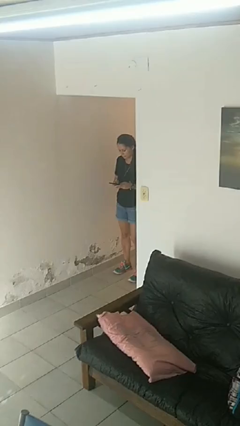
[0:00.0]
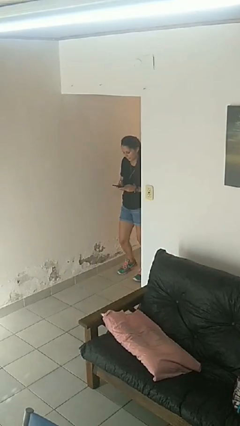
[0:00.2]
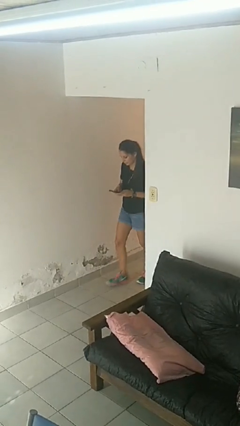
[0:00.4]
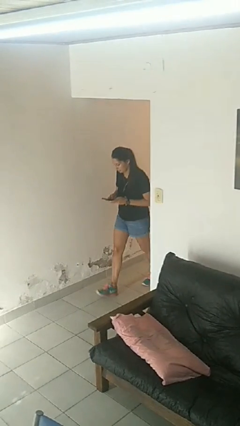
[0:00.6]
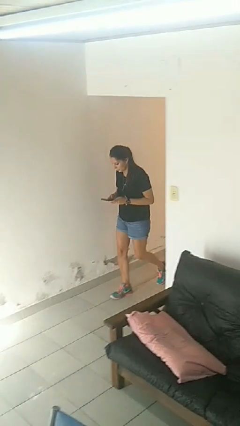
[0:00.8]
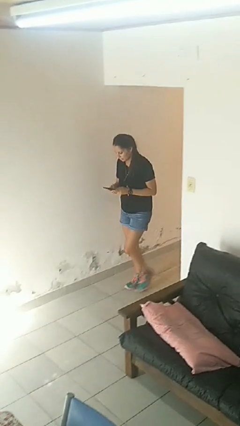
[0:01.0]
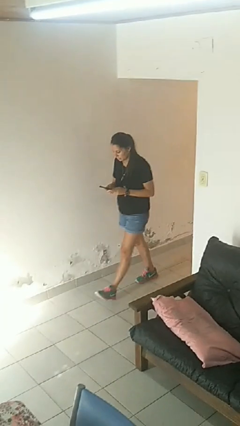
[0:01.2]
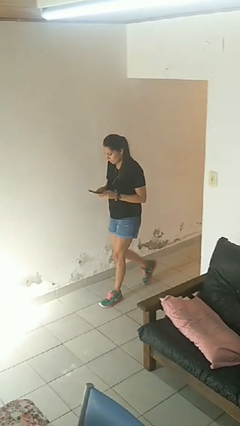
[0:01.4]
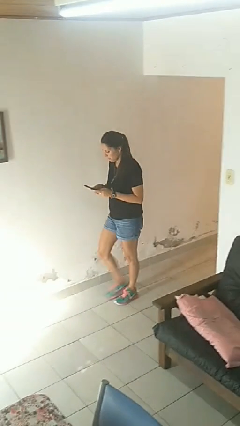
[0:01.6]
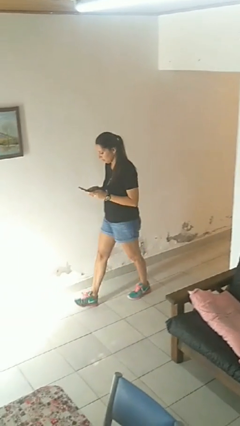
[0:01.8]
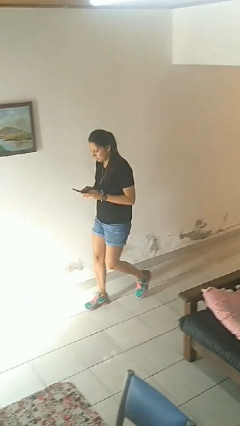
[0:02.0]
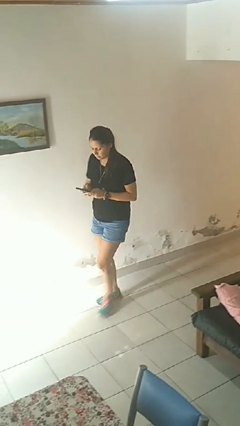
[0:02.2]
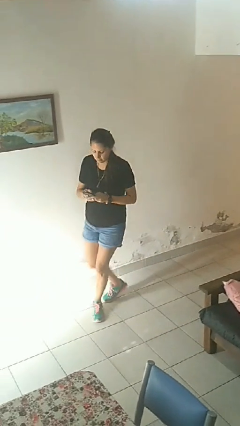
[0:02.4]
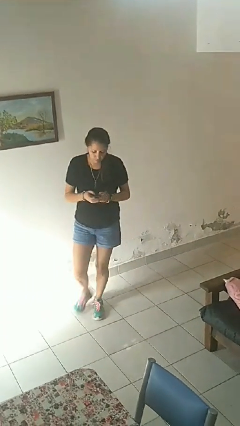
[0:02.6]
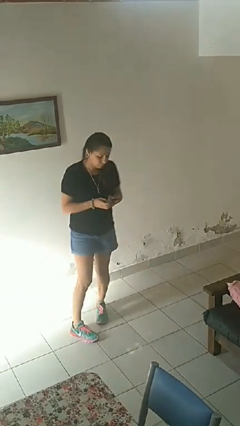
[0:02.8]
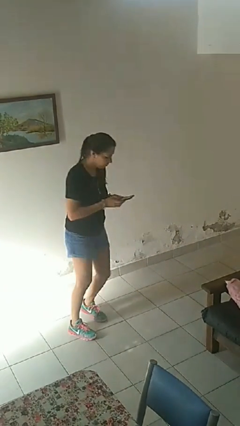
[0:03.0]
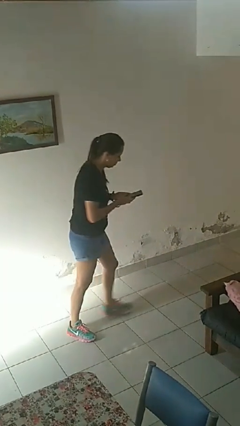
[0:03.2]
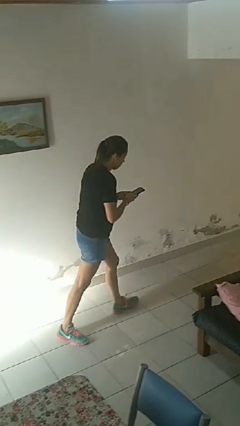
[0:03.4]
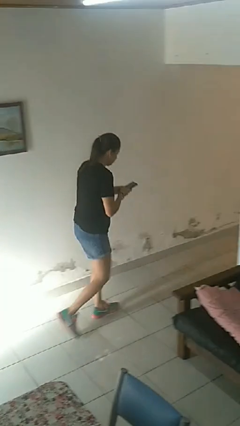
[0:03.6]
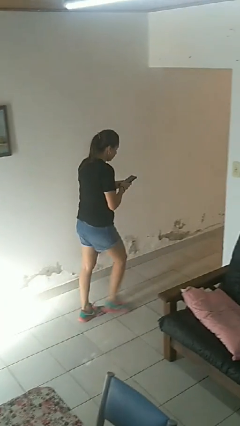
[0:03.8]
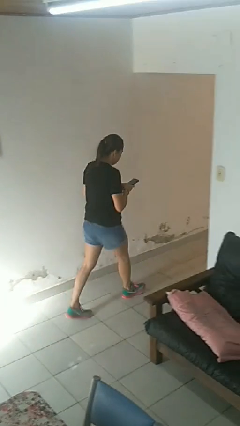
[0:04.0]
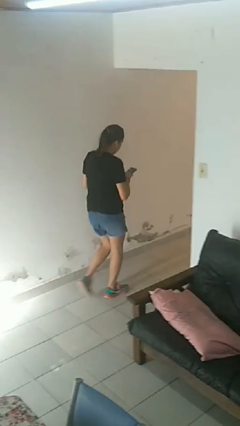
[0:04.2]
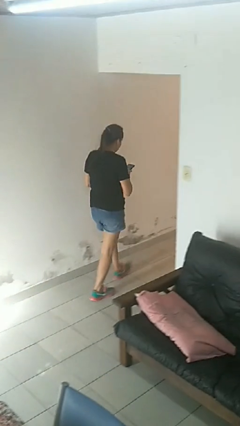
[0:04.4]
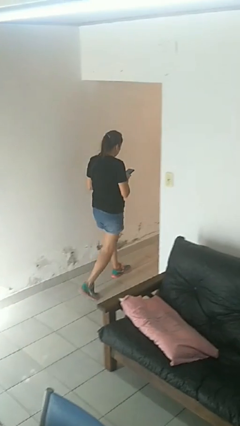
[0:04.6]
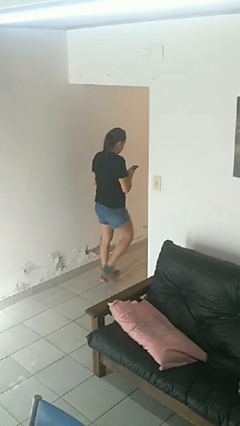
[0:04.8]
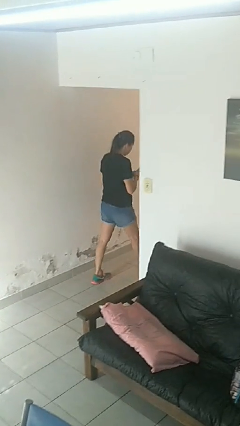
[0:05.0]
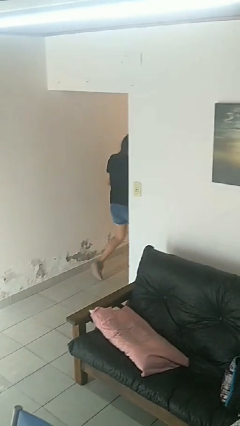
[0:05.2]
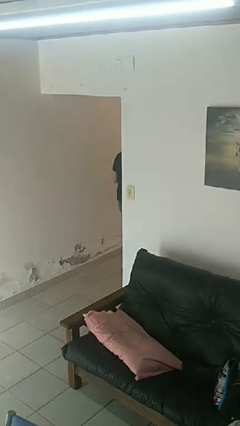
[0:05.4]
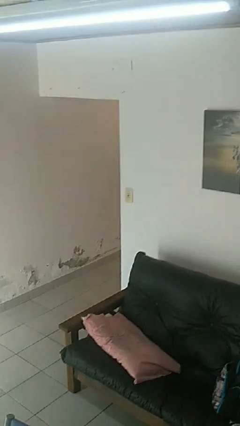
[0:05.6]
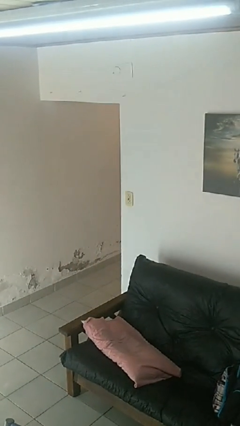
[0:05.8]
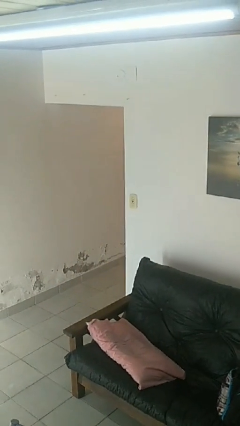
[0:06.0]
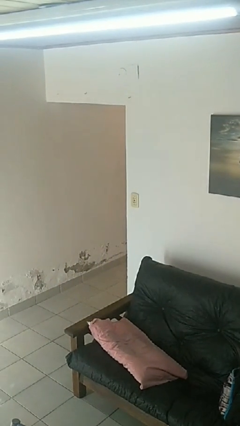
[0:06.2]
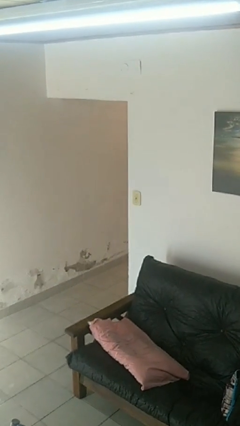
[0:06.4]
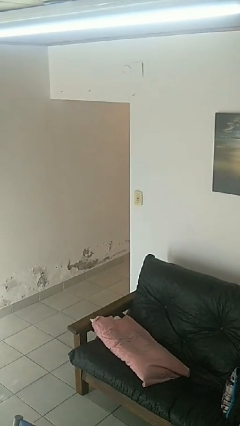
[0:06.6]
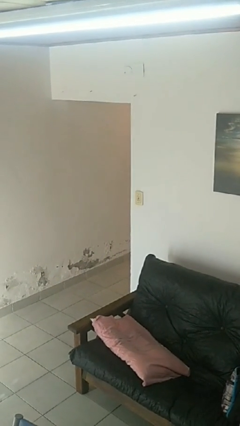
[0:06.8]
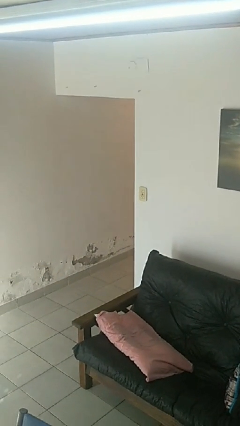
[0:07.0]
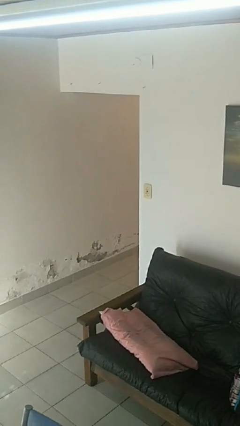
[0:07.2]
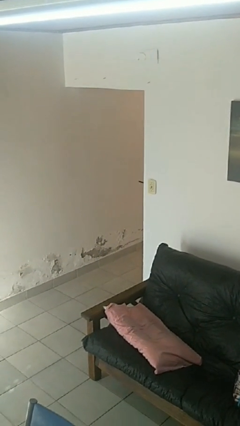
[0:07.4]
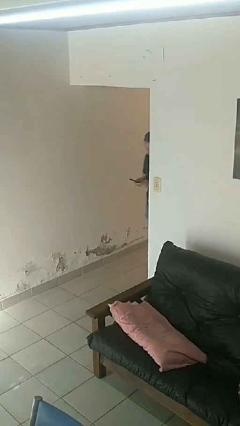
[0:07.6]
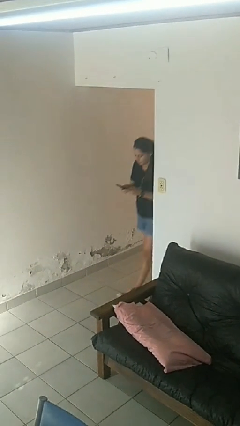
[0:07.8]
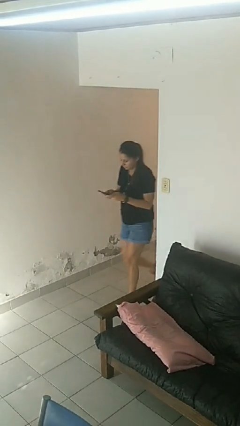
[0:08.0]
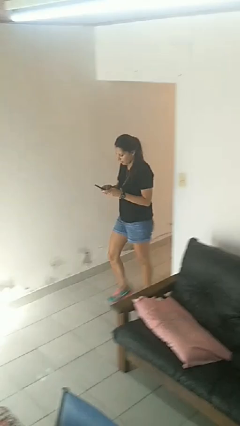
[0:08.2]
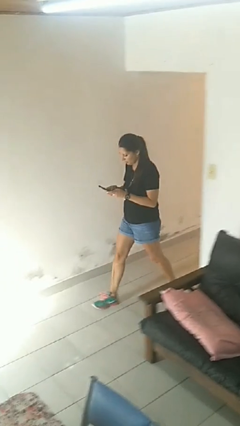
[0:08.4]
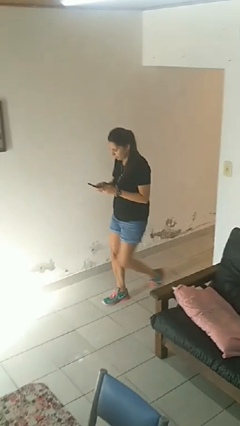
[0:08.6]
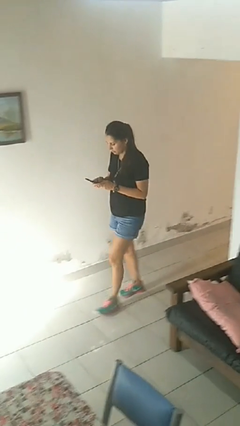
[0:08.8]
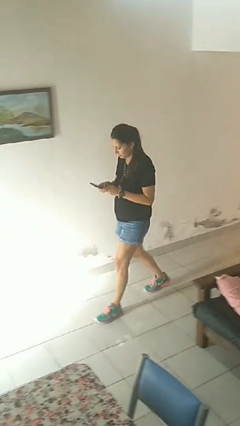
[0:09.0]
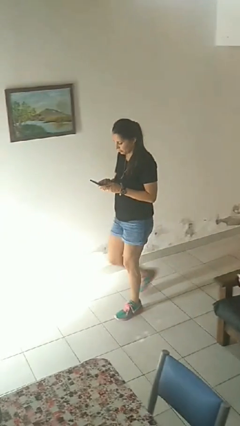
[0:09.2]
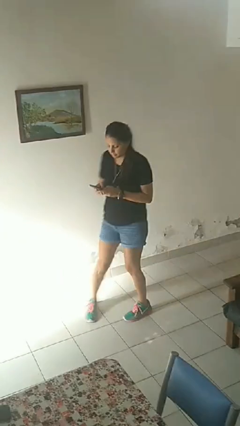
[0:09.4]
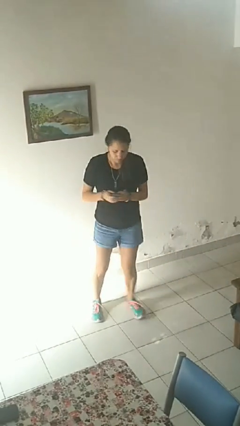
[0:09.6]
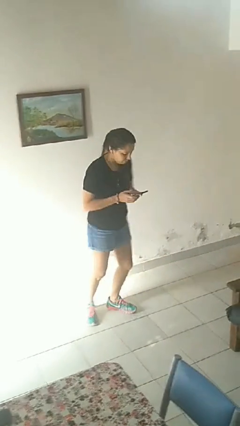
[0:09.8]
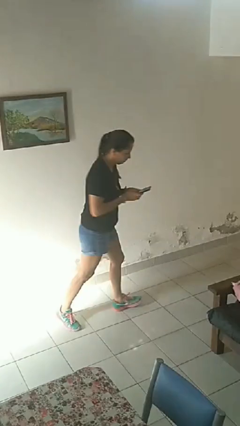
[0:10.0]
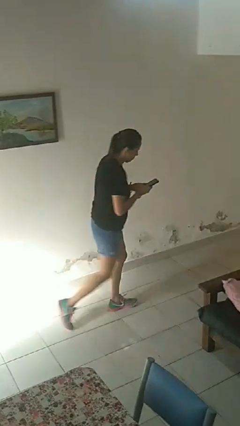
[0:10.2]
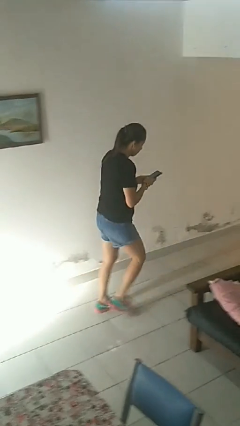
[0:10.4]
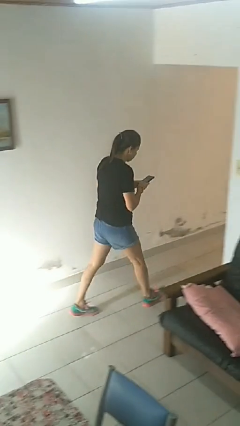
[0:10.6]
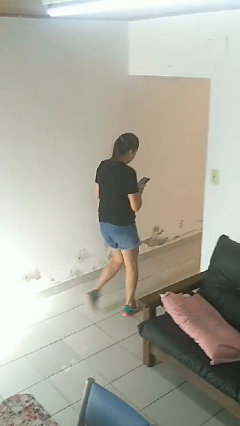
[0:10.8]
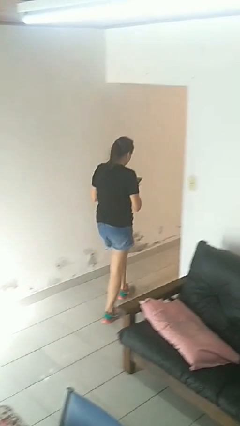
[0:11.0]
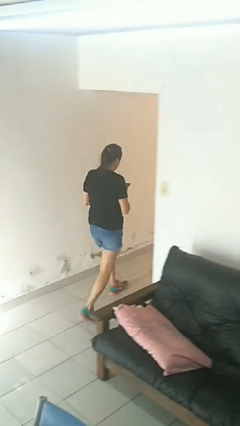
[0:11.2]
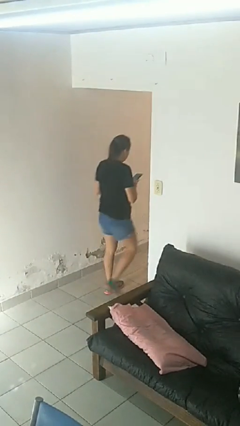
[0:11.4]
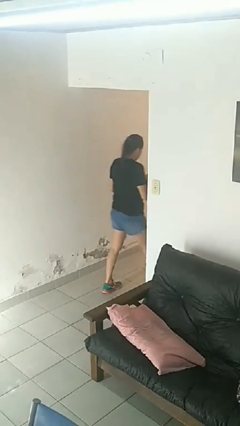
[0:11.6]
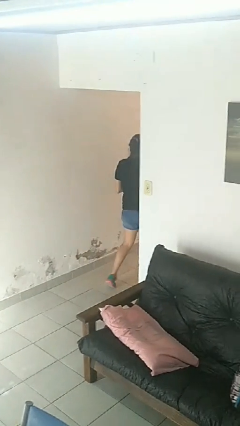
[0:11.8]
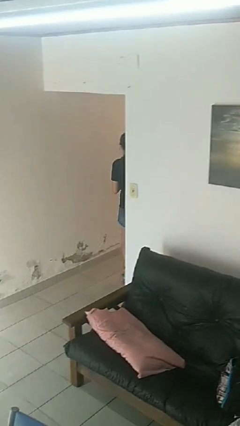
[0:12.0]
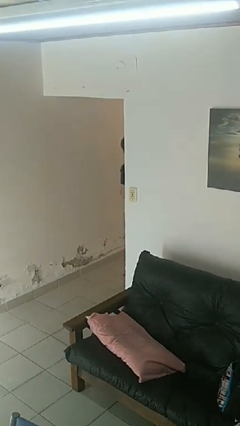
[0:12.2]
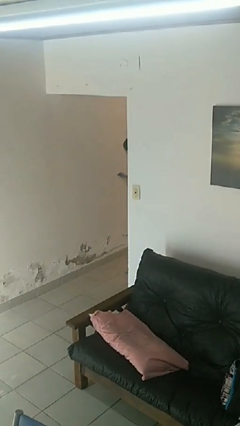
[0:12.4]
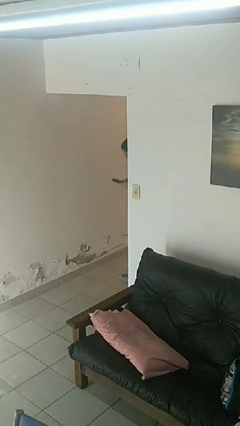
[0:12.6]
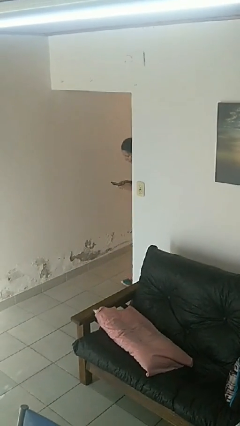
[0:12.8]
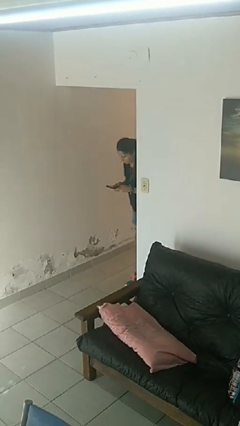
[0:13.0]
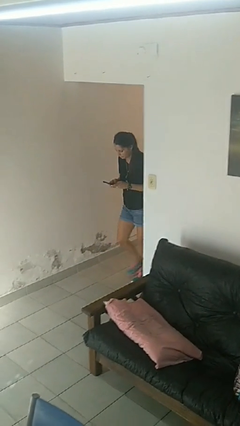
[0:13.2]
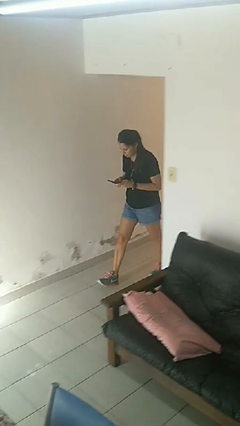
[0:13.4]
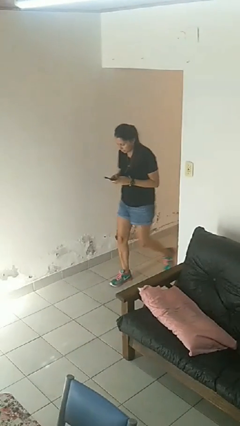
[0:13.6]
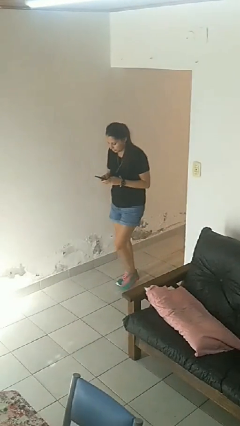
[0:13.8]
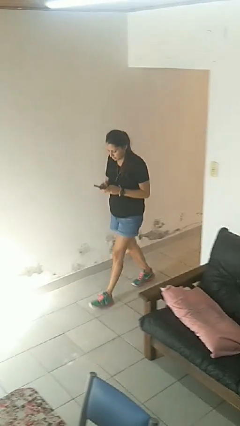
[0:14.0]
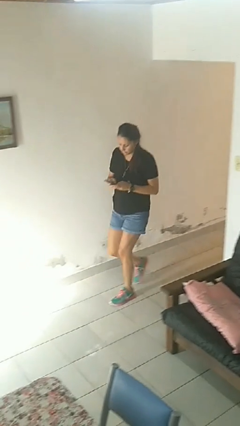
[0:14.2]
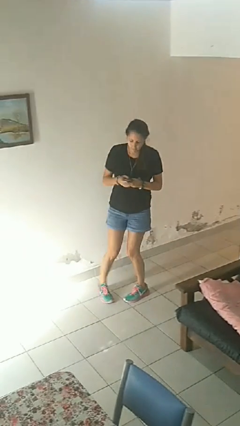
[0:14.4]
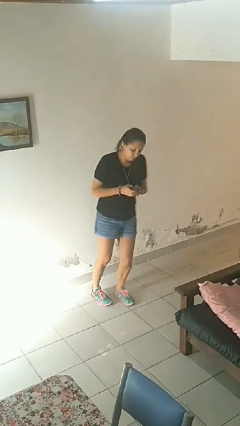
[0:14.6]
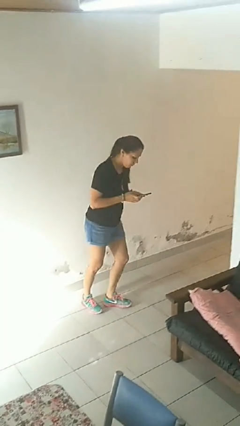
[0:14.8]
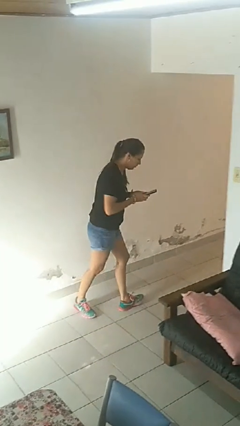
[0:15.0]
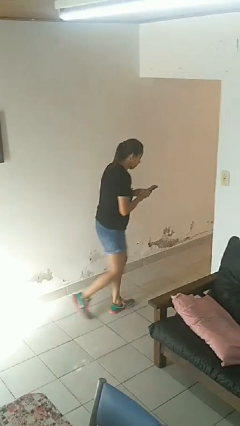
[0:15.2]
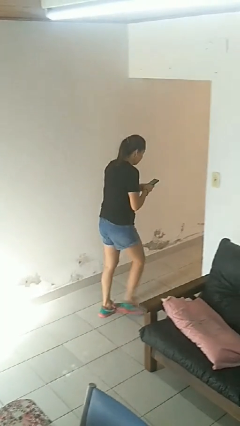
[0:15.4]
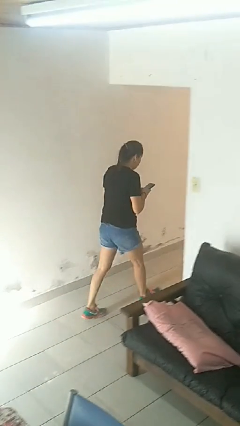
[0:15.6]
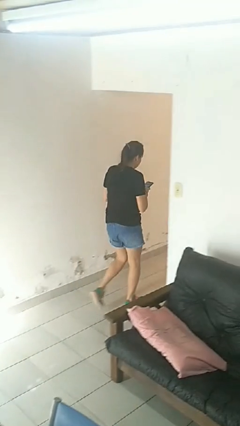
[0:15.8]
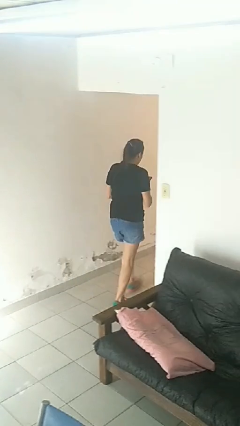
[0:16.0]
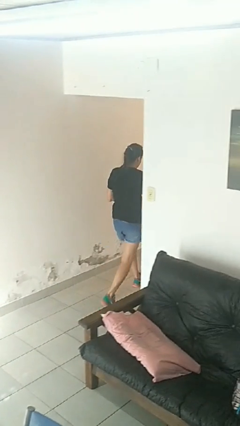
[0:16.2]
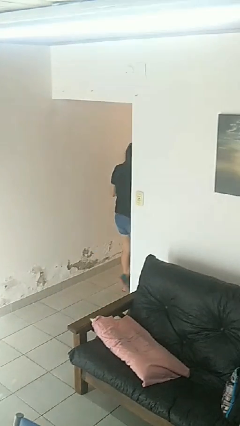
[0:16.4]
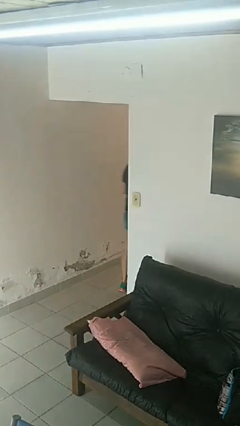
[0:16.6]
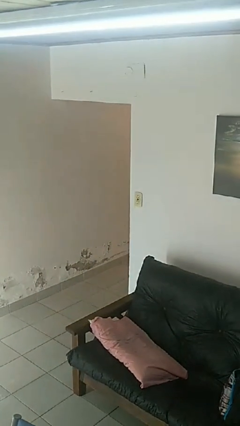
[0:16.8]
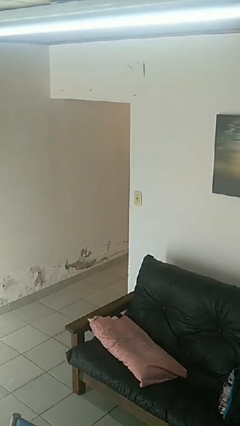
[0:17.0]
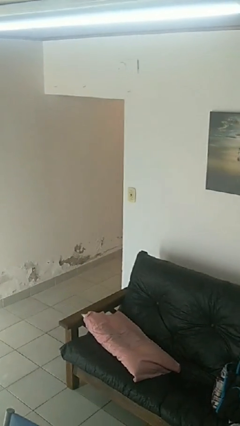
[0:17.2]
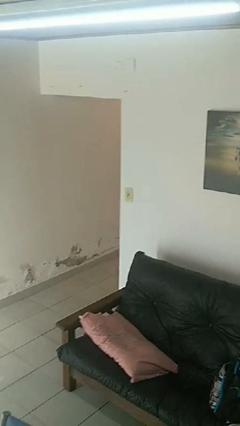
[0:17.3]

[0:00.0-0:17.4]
person texts on phone

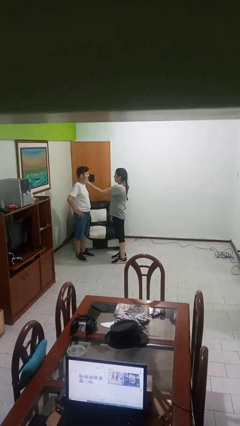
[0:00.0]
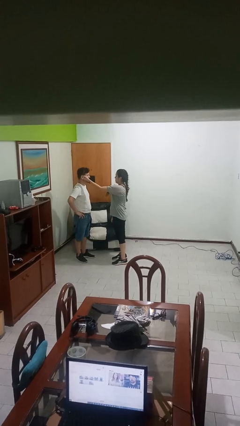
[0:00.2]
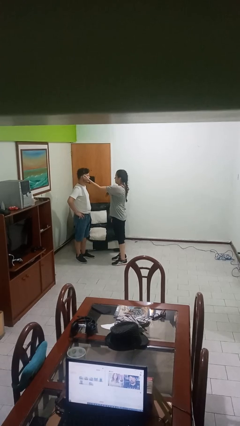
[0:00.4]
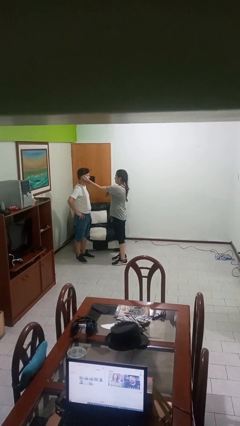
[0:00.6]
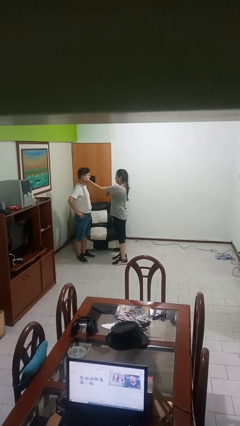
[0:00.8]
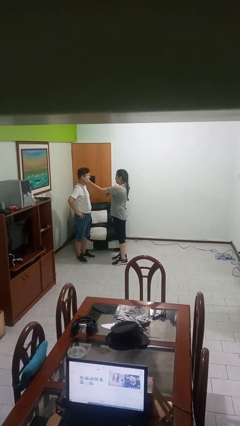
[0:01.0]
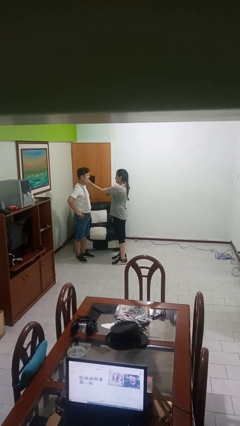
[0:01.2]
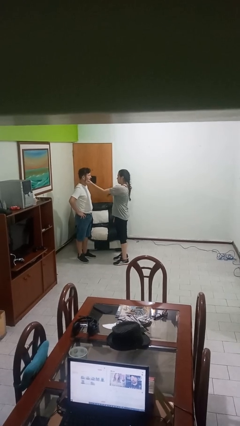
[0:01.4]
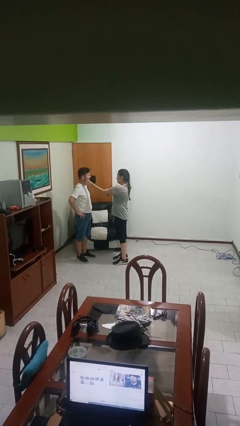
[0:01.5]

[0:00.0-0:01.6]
person touches face of person
